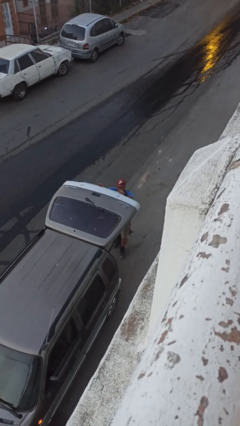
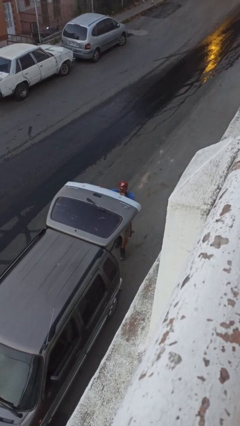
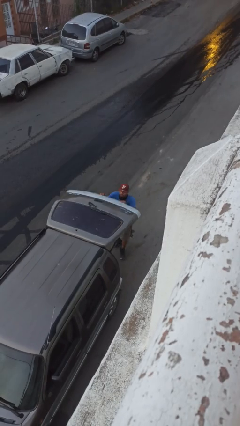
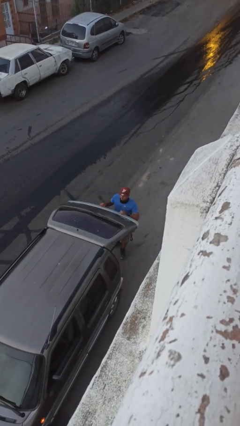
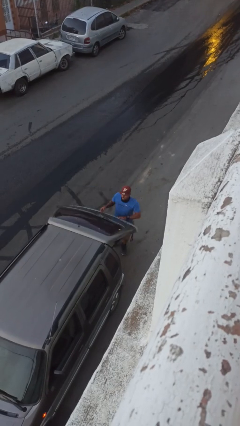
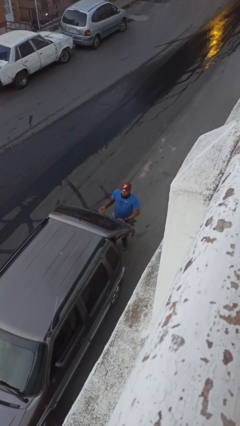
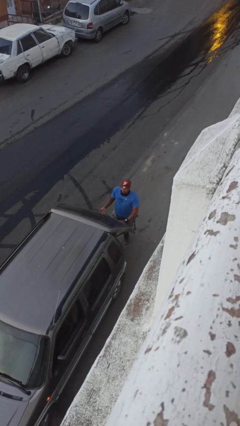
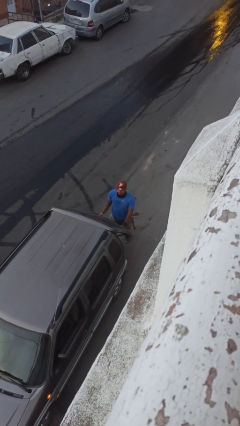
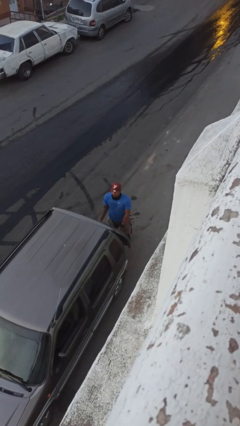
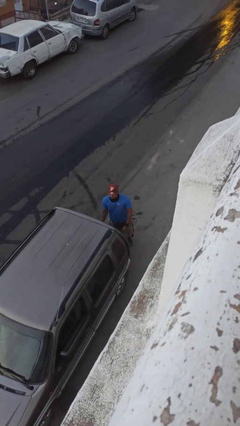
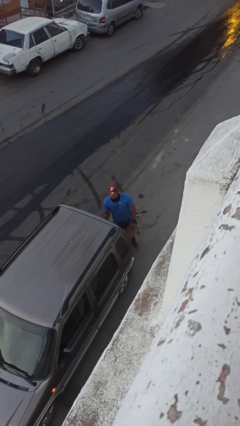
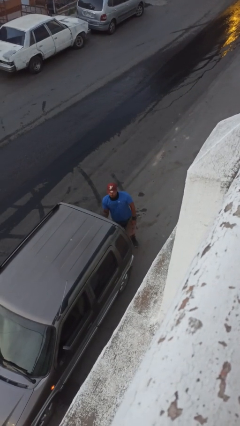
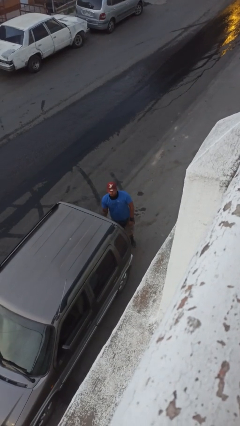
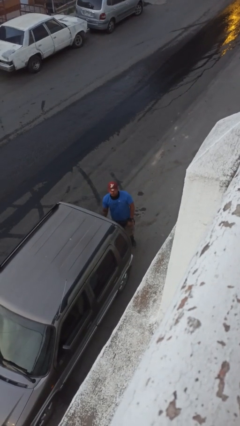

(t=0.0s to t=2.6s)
person closes car trunk

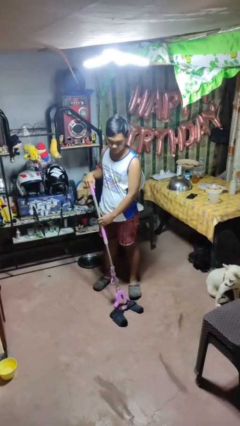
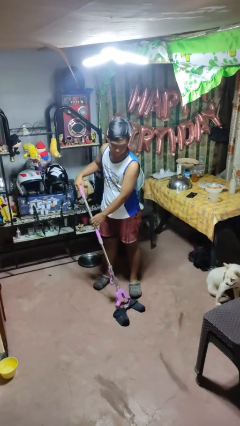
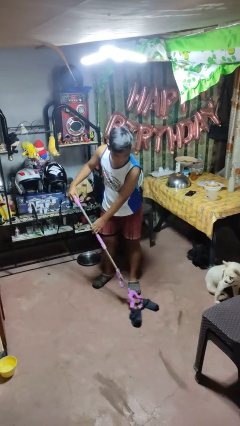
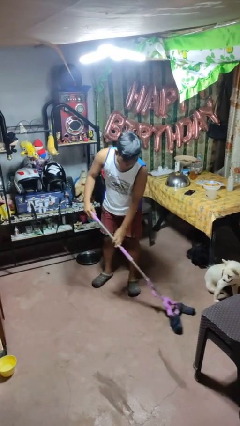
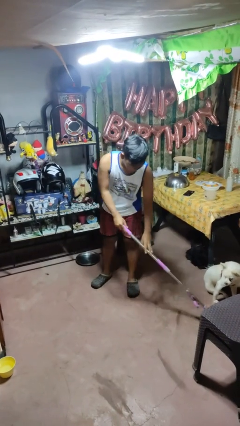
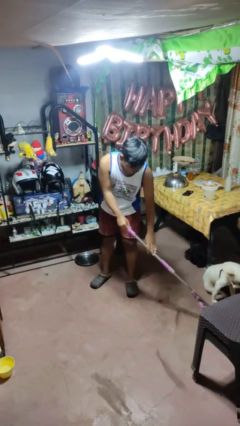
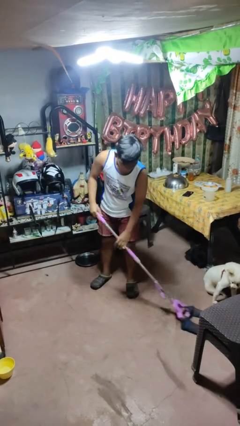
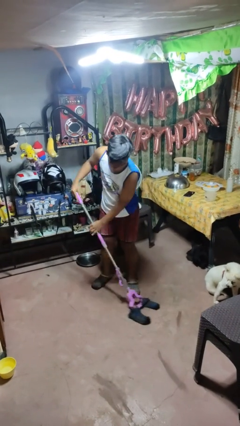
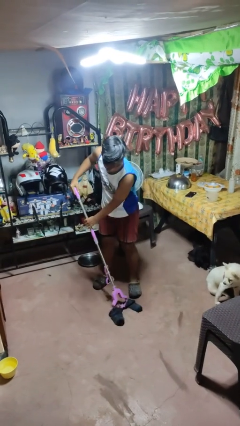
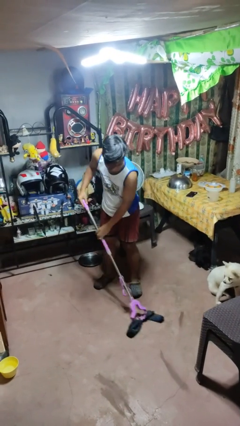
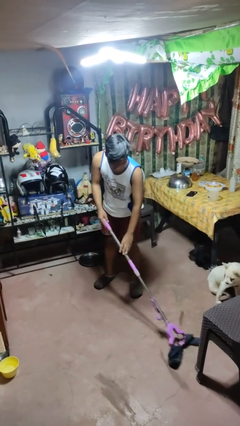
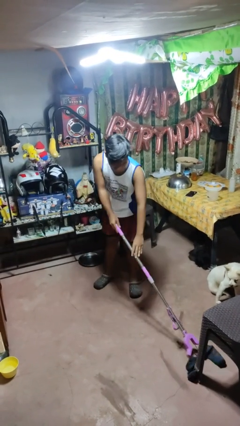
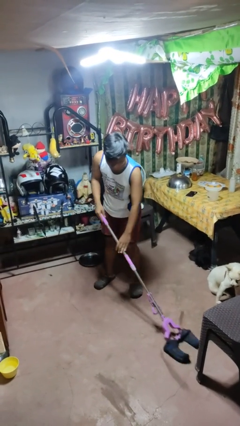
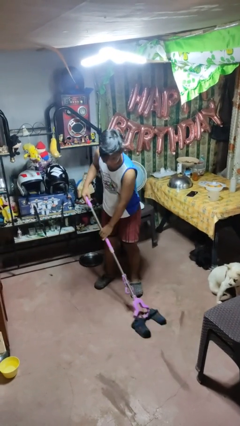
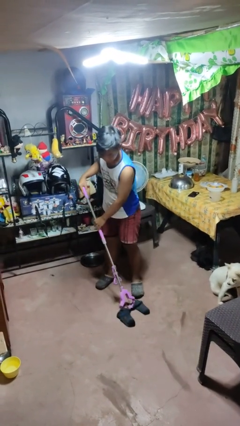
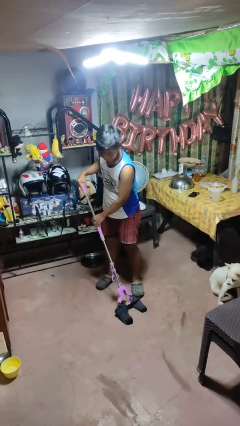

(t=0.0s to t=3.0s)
person mops

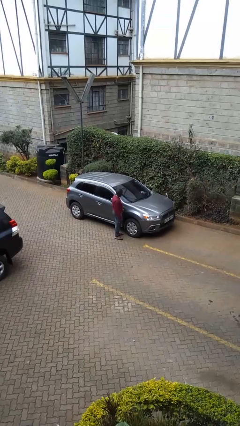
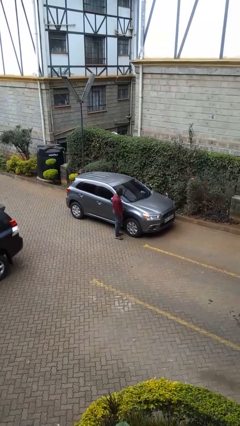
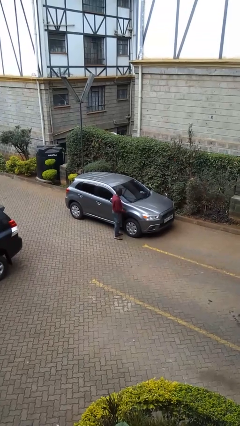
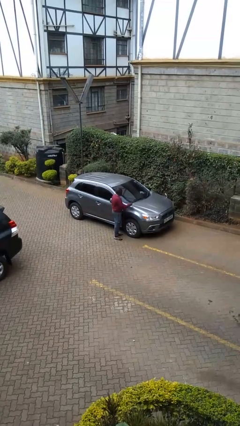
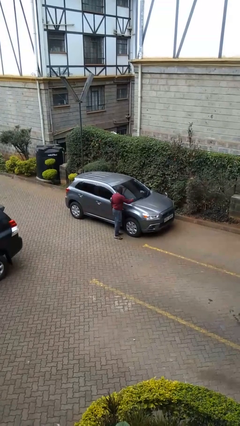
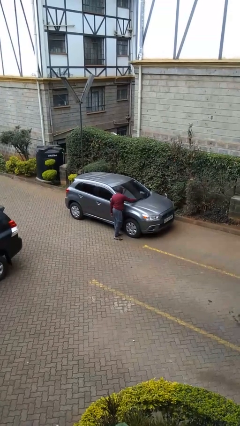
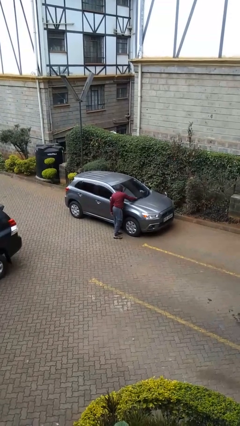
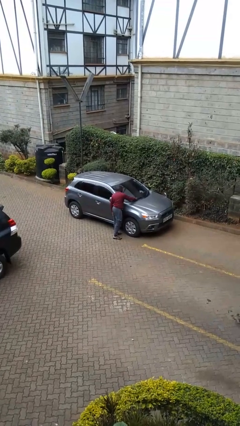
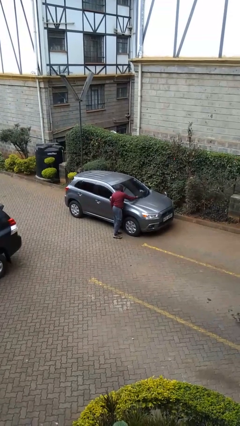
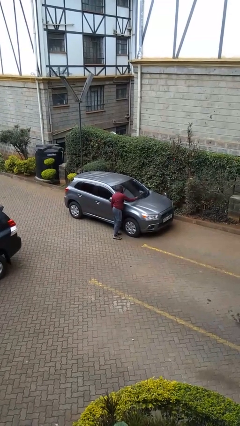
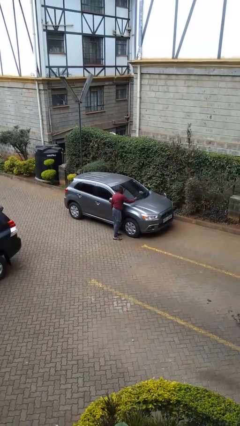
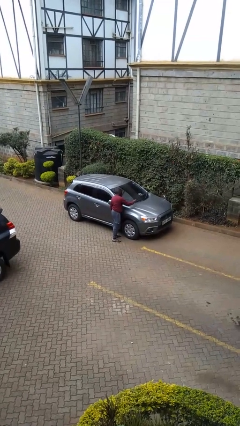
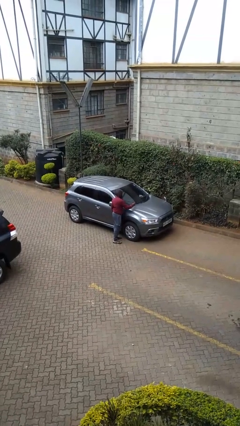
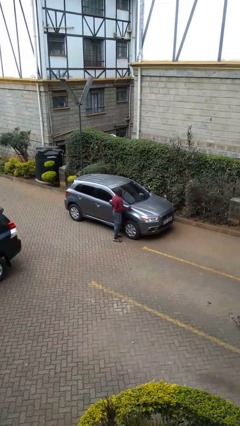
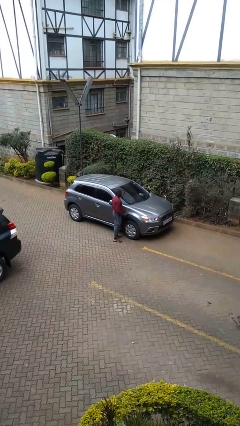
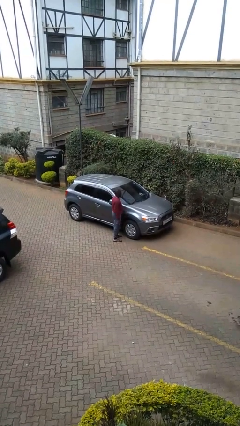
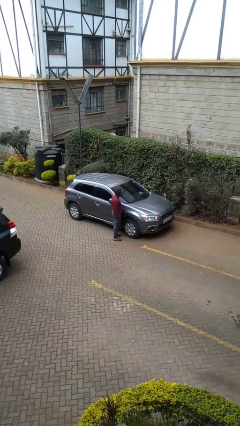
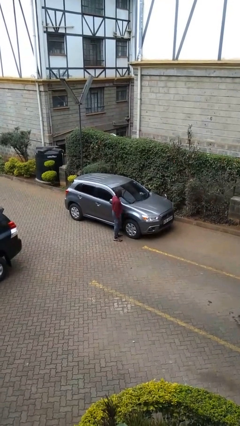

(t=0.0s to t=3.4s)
person flips up car wipers

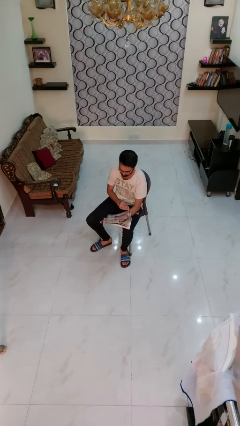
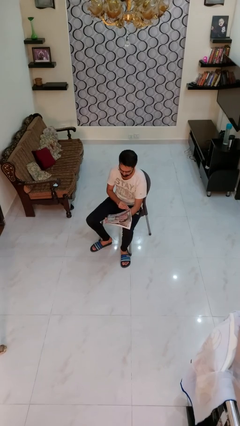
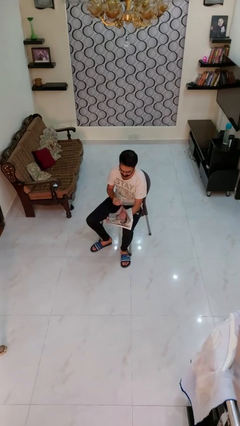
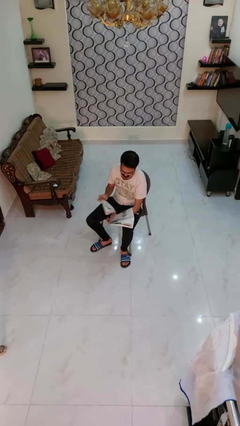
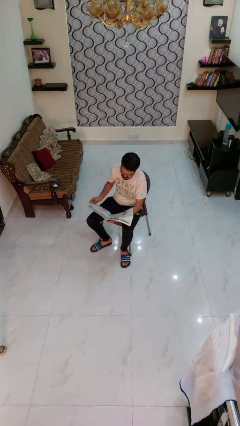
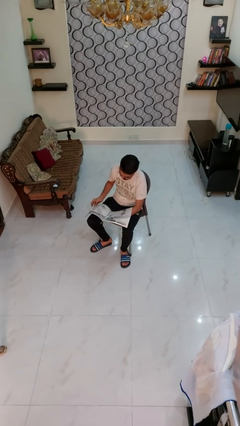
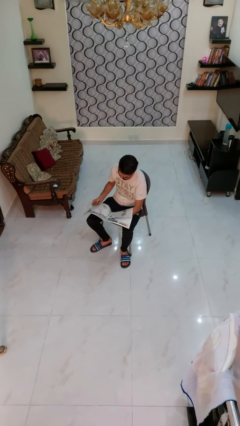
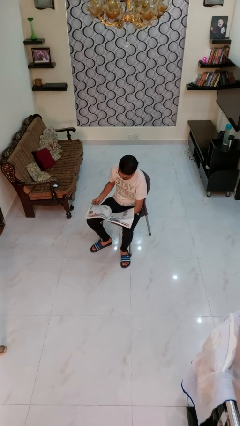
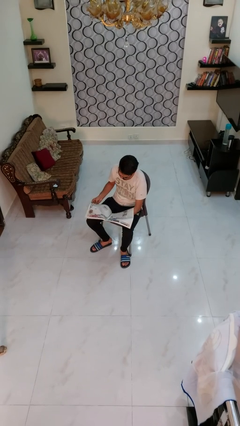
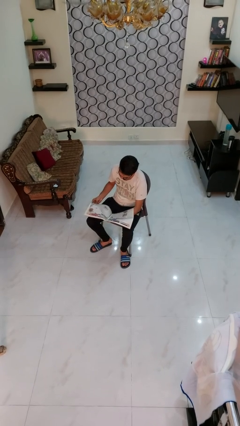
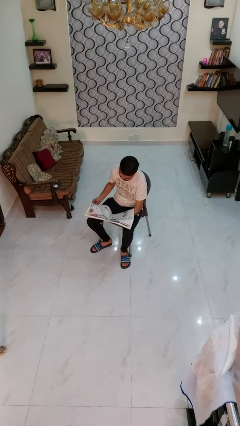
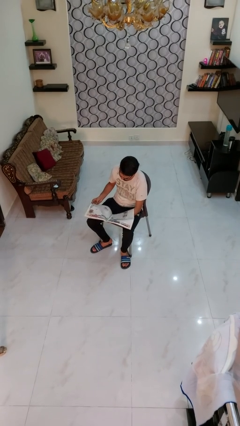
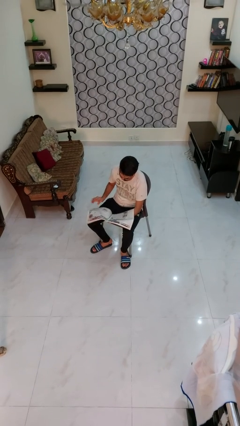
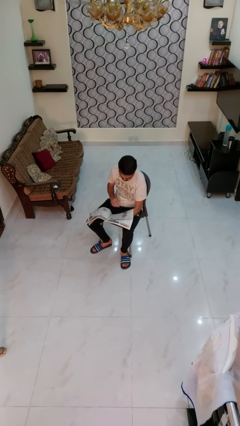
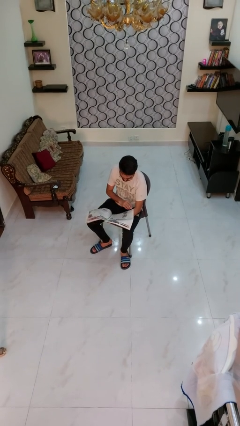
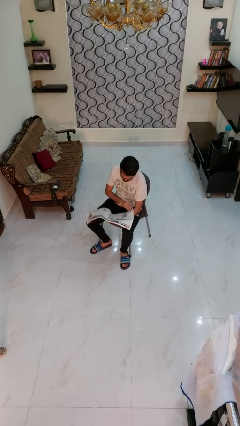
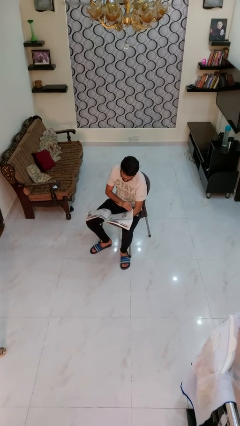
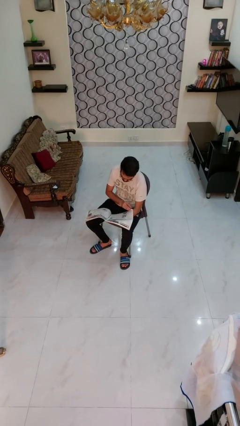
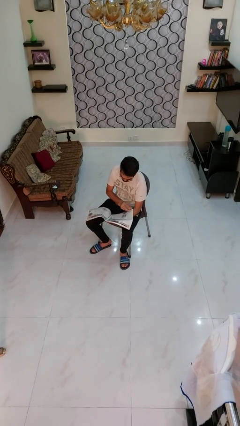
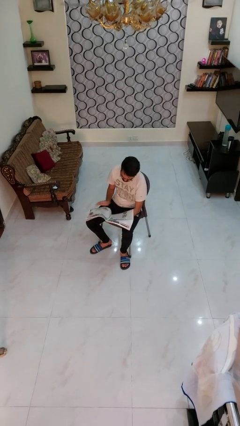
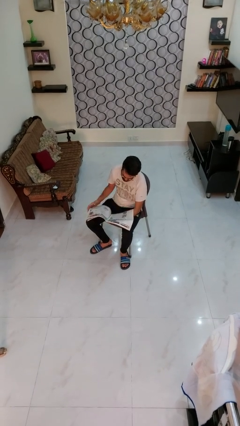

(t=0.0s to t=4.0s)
person reads magazine

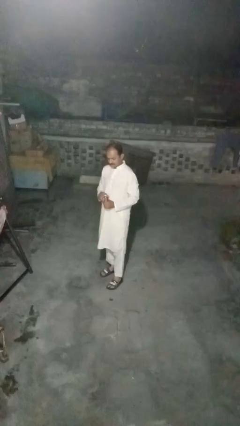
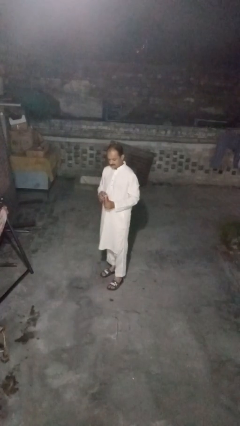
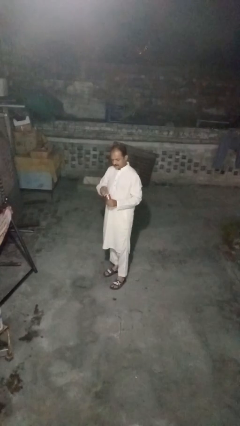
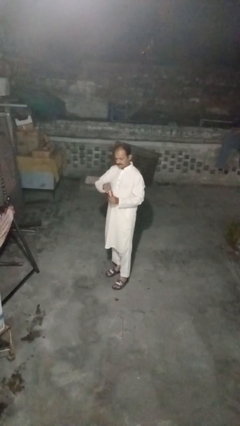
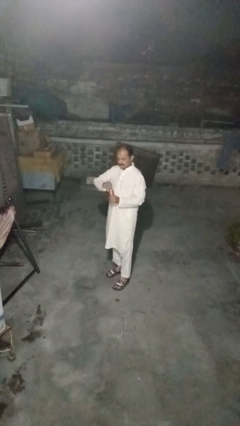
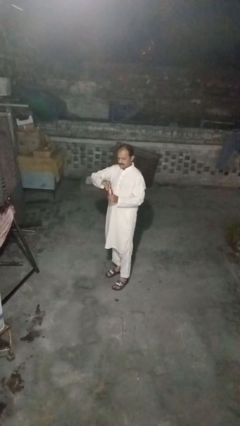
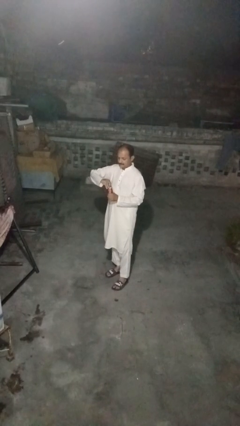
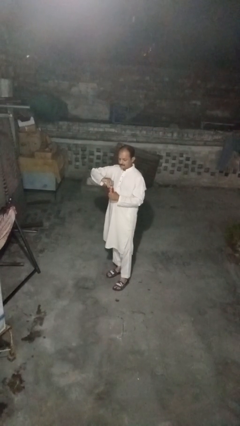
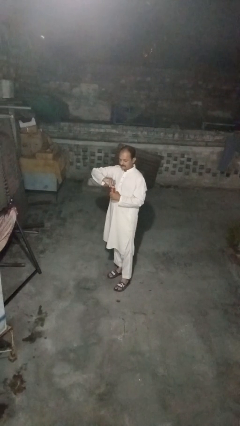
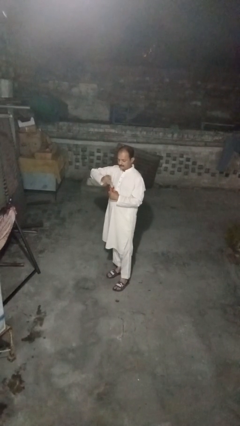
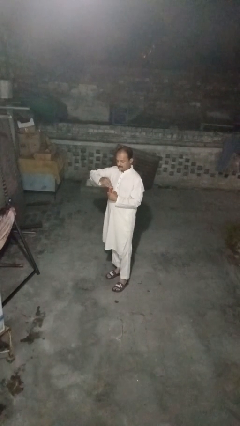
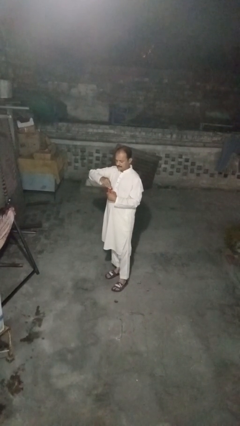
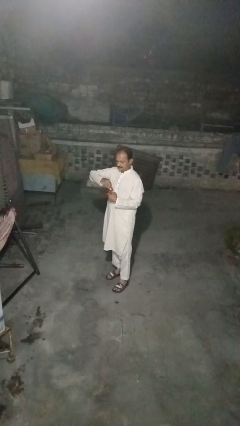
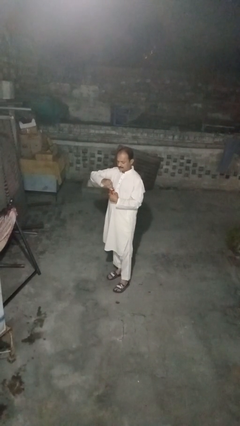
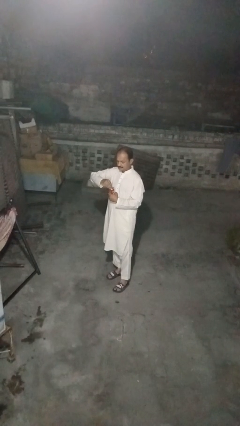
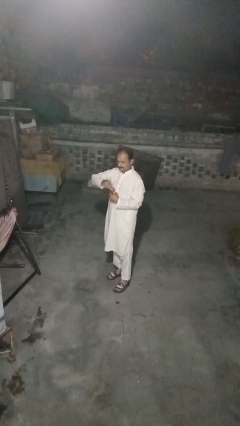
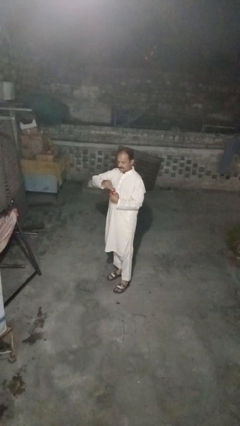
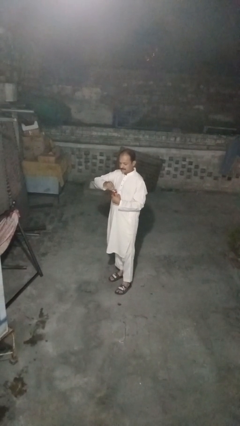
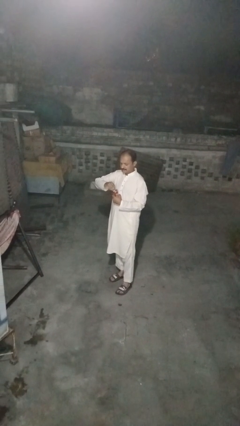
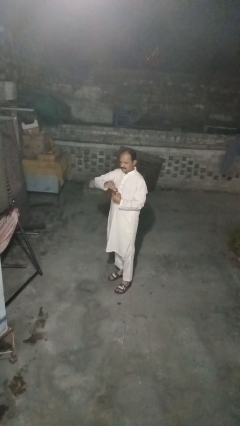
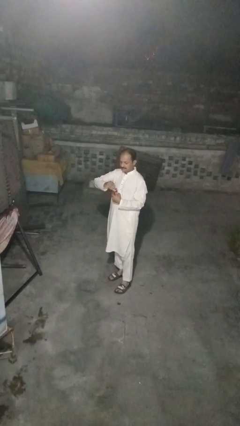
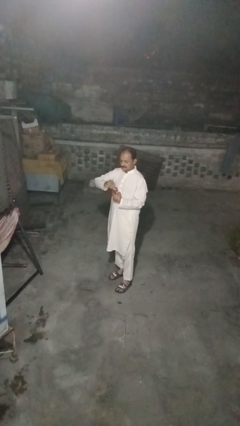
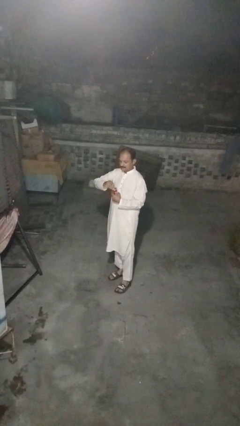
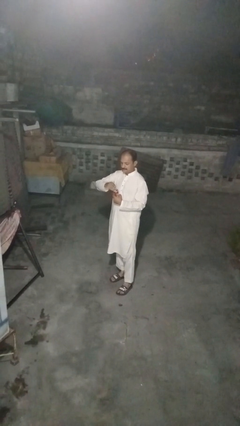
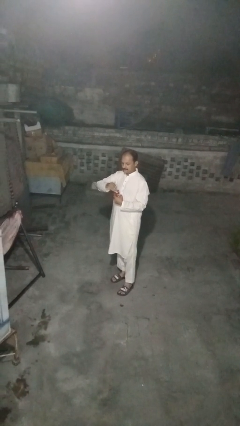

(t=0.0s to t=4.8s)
person opens beverage can
